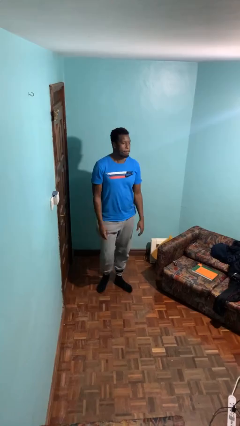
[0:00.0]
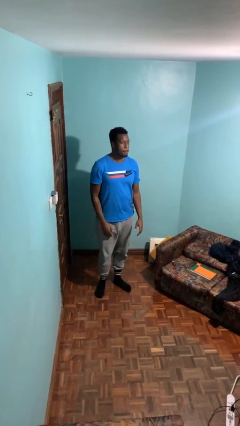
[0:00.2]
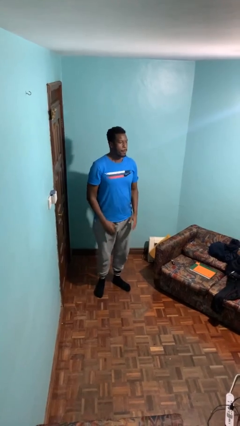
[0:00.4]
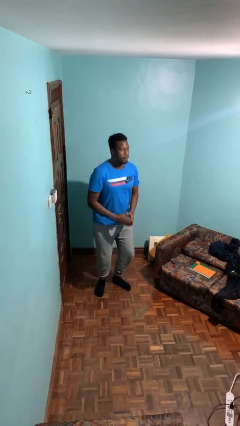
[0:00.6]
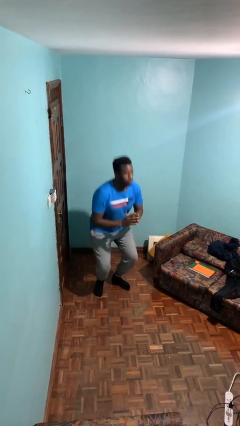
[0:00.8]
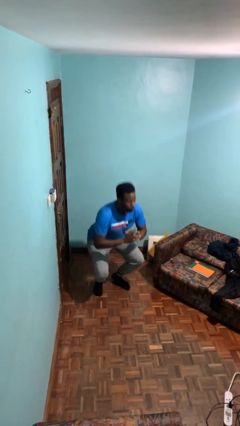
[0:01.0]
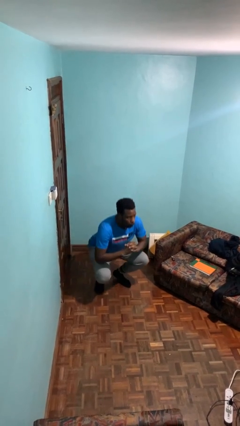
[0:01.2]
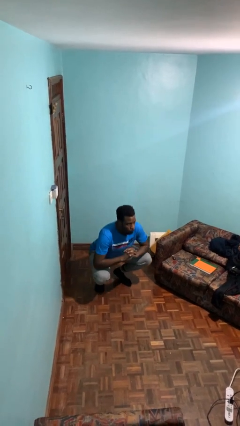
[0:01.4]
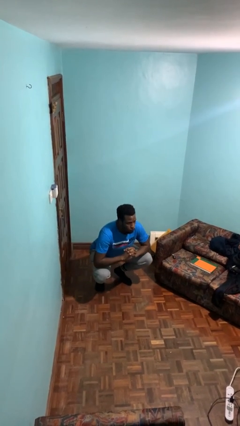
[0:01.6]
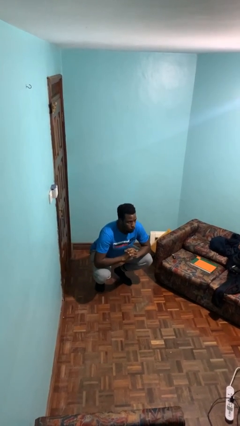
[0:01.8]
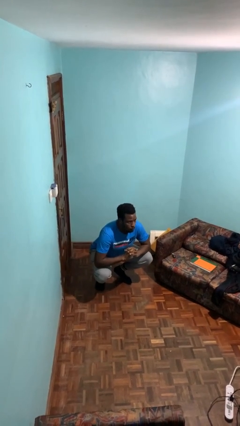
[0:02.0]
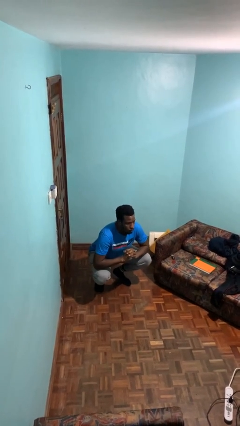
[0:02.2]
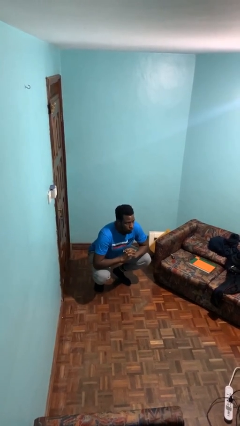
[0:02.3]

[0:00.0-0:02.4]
person squats

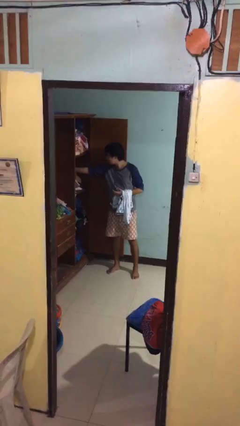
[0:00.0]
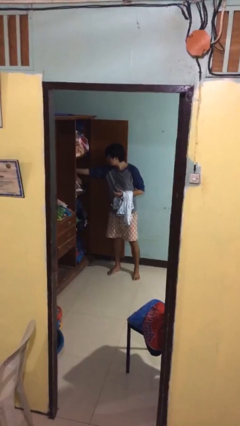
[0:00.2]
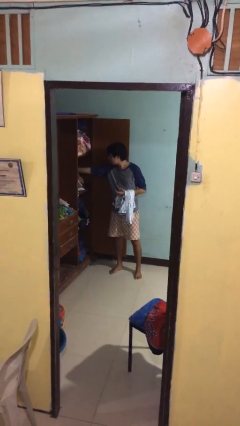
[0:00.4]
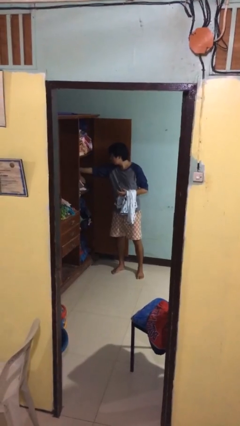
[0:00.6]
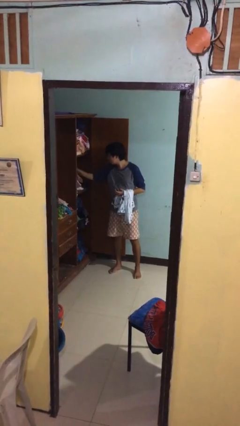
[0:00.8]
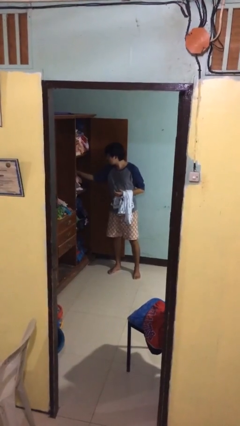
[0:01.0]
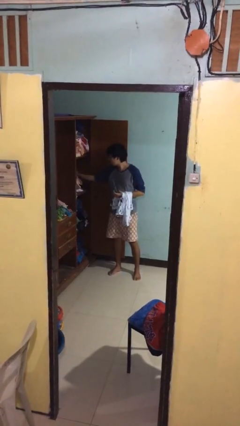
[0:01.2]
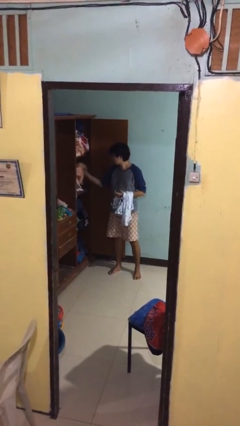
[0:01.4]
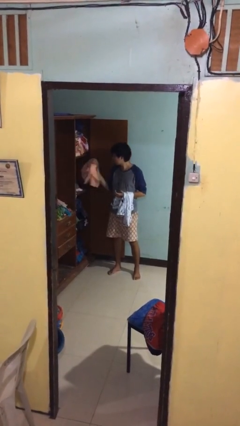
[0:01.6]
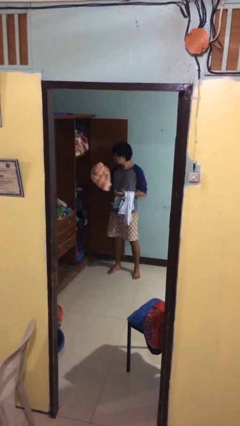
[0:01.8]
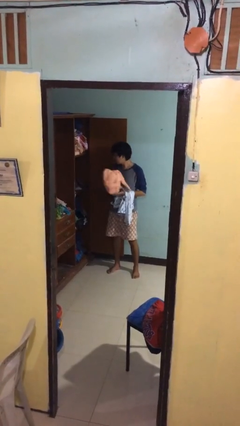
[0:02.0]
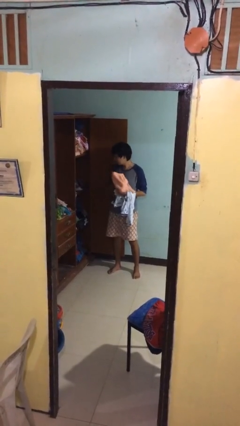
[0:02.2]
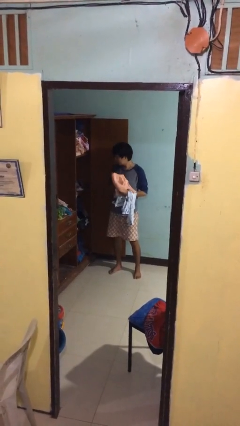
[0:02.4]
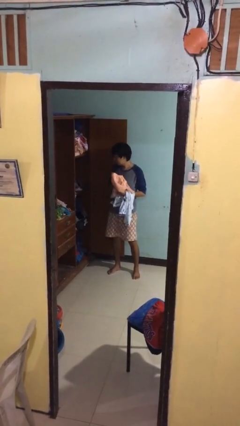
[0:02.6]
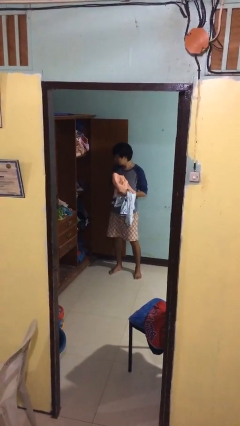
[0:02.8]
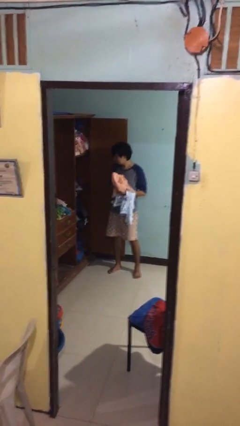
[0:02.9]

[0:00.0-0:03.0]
person takes clothes from dresser

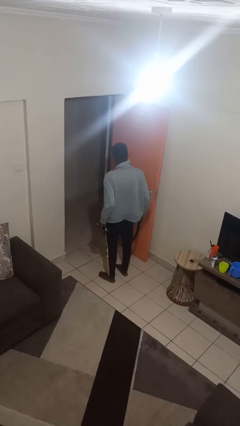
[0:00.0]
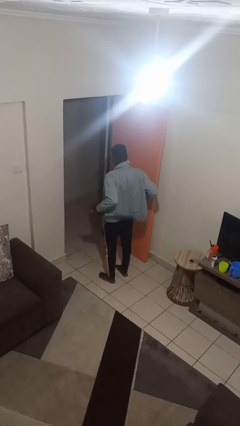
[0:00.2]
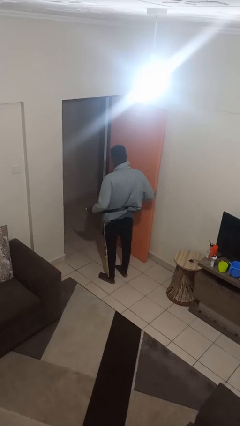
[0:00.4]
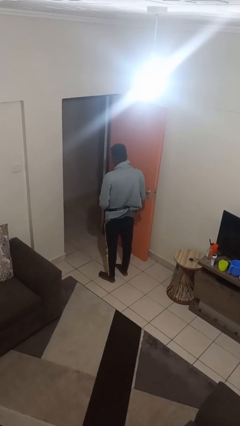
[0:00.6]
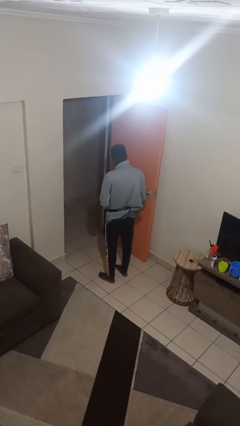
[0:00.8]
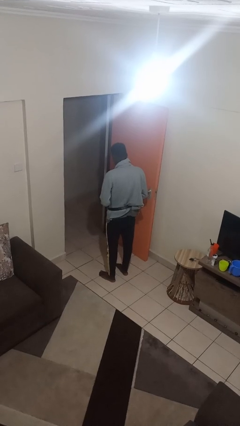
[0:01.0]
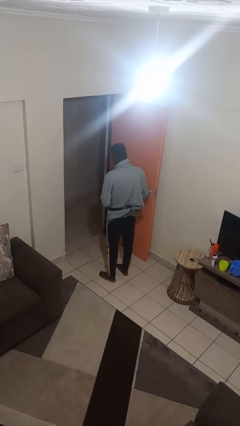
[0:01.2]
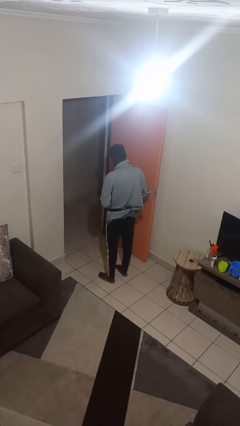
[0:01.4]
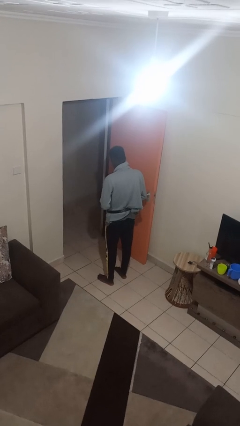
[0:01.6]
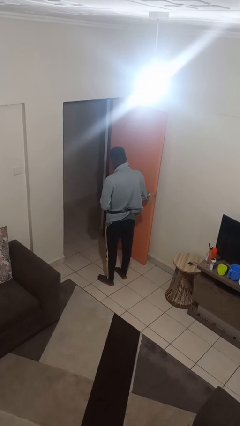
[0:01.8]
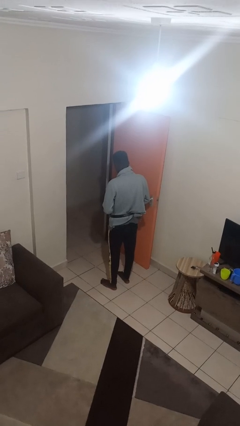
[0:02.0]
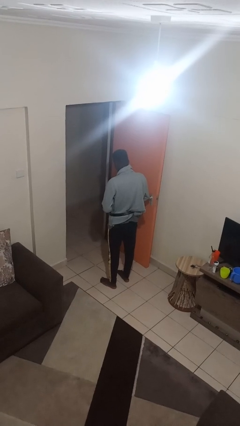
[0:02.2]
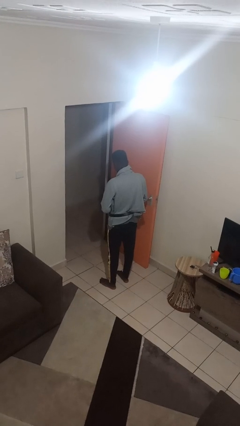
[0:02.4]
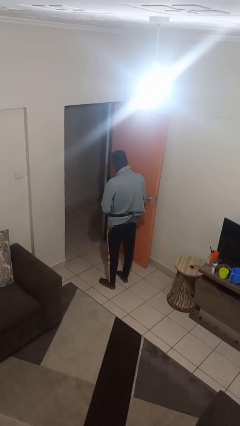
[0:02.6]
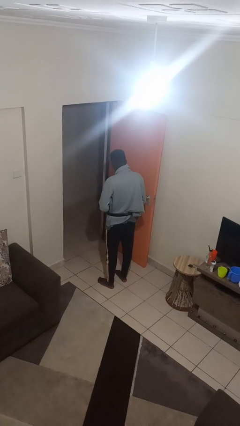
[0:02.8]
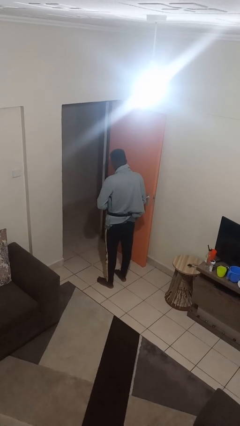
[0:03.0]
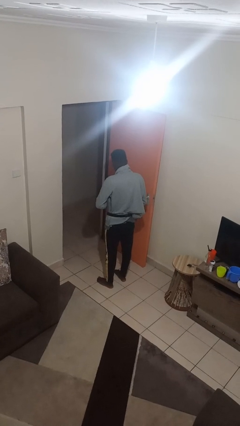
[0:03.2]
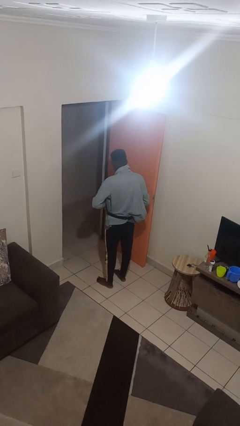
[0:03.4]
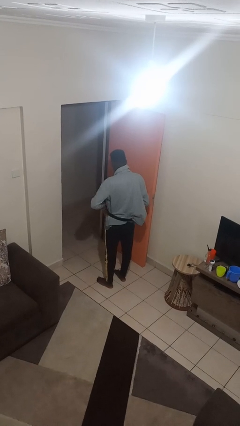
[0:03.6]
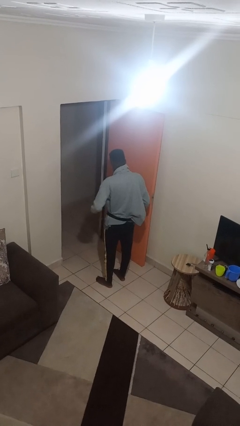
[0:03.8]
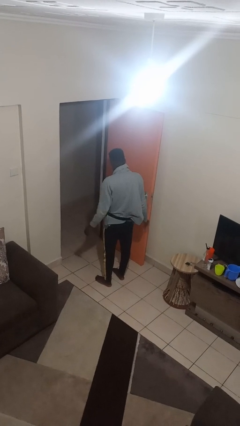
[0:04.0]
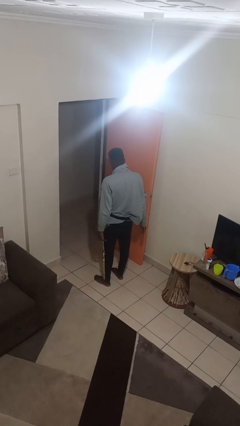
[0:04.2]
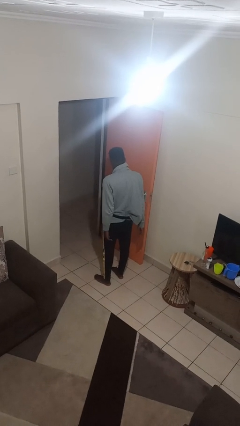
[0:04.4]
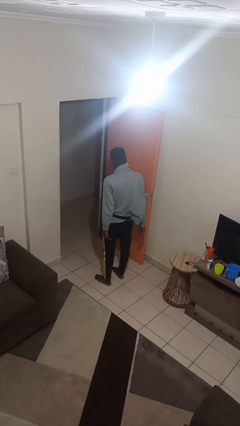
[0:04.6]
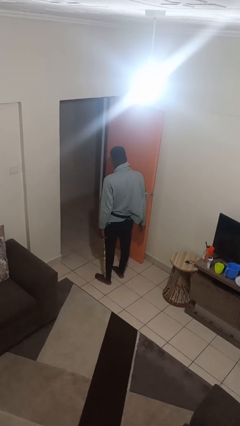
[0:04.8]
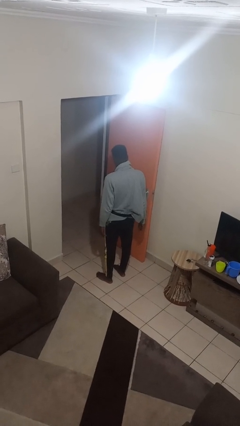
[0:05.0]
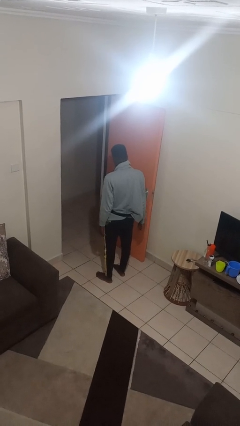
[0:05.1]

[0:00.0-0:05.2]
person puts on belt

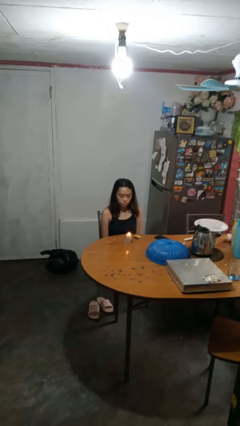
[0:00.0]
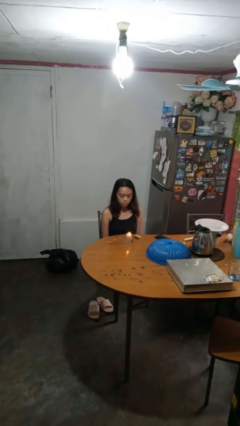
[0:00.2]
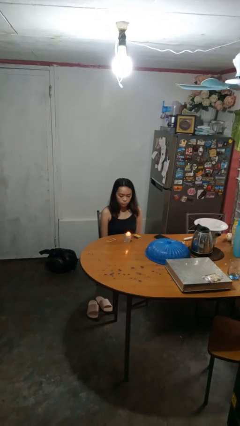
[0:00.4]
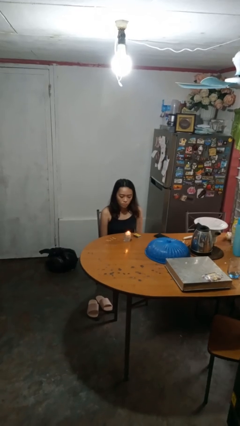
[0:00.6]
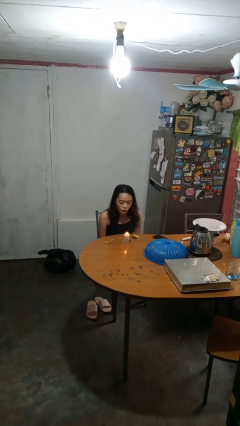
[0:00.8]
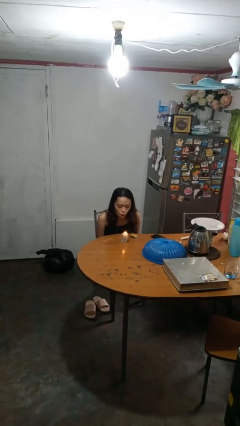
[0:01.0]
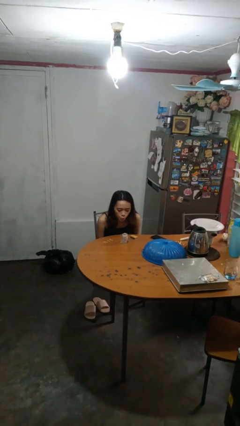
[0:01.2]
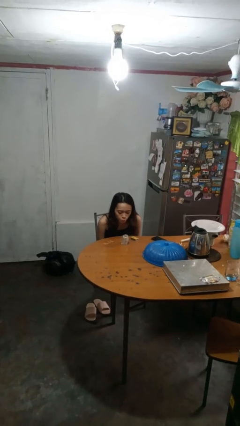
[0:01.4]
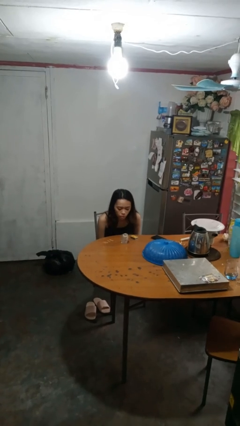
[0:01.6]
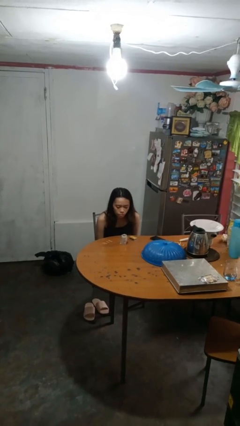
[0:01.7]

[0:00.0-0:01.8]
person extinguishes candle

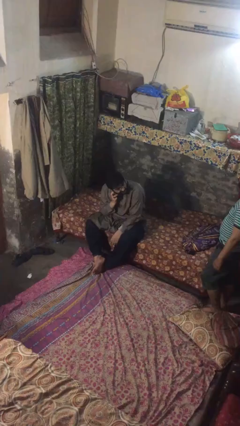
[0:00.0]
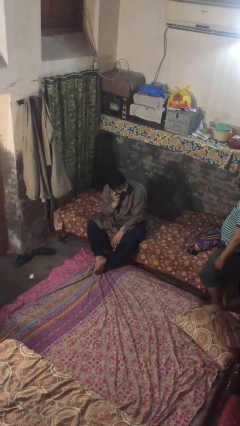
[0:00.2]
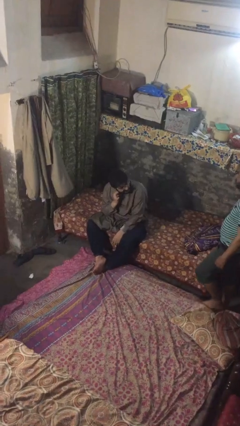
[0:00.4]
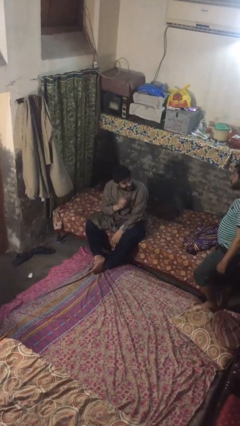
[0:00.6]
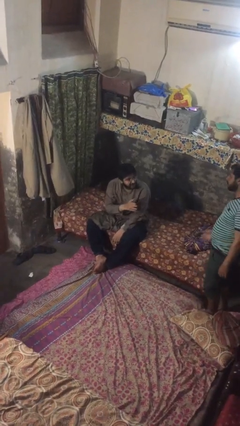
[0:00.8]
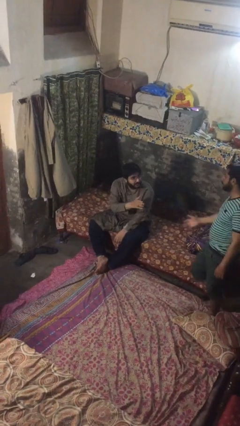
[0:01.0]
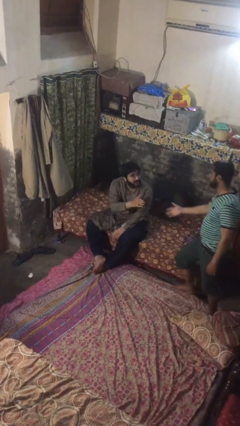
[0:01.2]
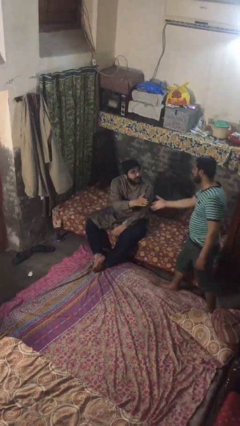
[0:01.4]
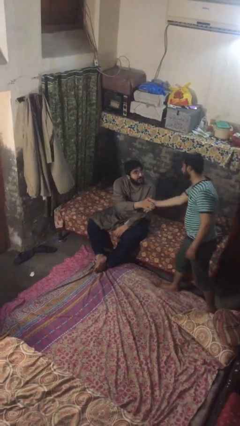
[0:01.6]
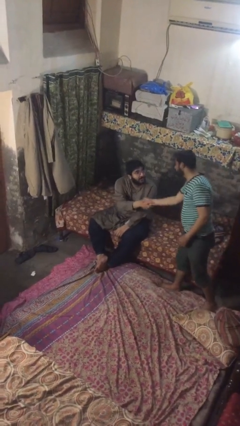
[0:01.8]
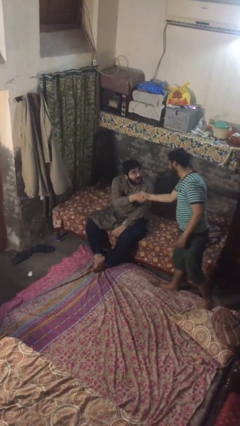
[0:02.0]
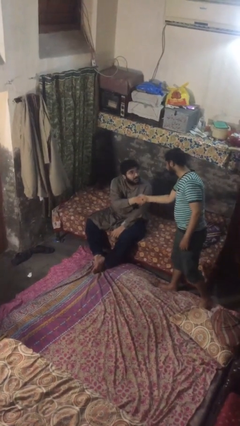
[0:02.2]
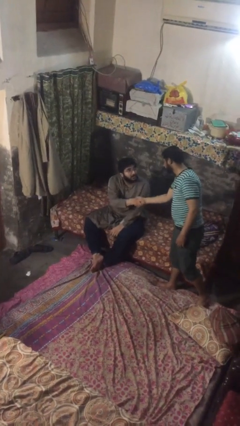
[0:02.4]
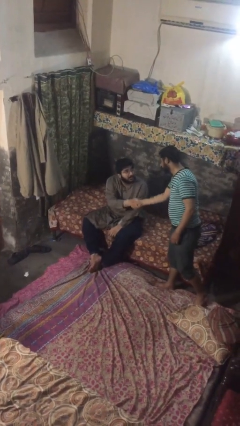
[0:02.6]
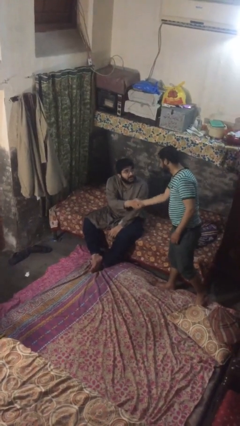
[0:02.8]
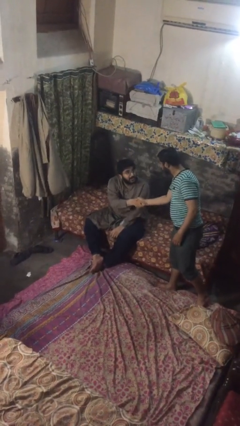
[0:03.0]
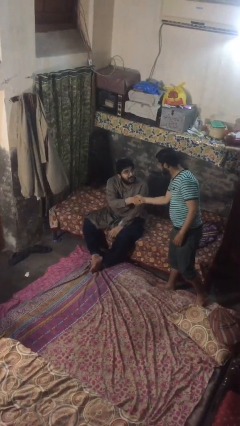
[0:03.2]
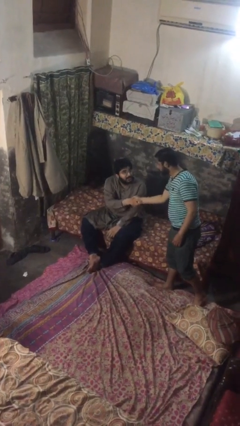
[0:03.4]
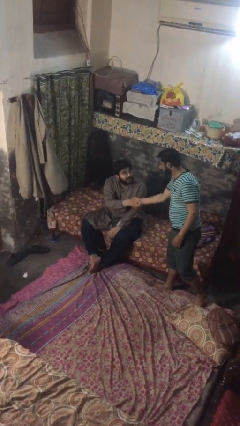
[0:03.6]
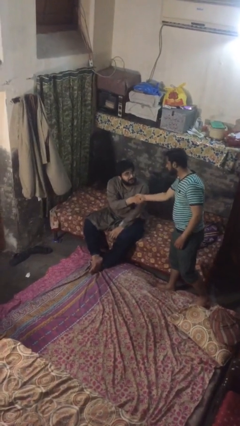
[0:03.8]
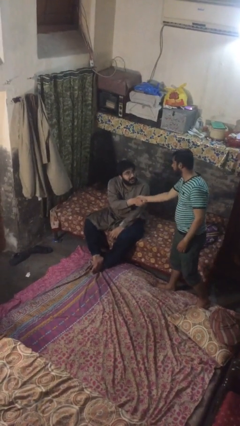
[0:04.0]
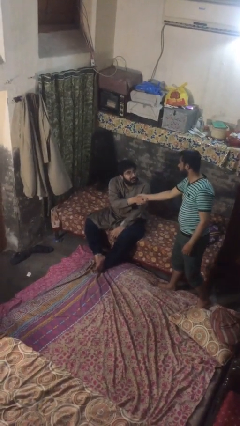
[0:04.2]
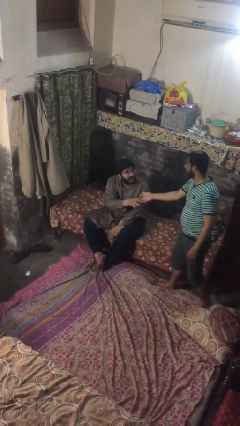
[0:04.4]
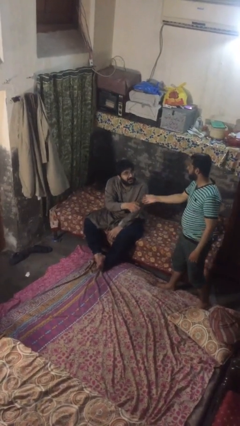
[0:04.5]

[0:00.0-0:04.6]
person shakes hand

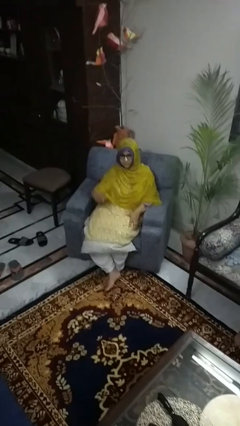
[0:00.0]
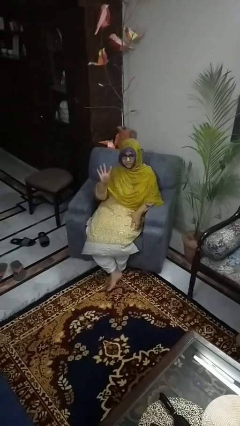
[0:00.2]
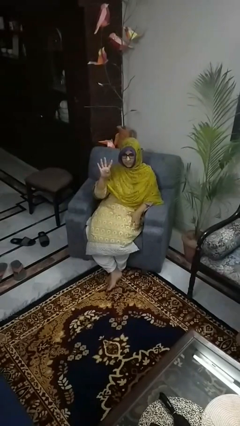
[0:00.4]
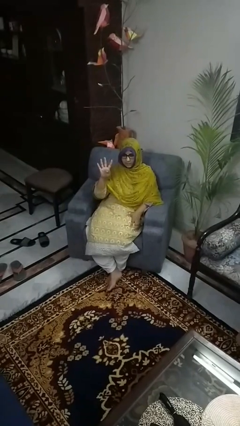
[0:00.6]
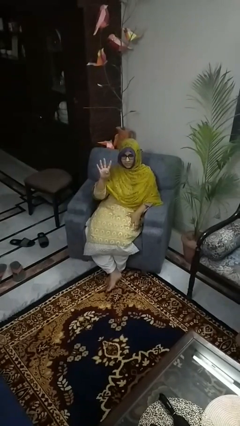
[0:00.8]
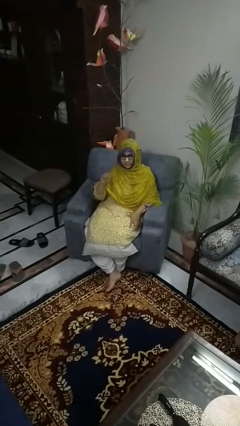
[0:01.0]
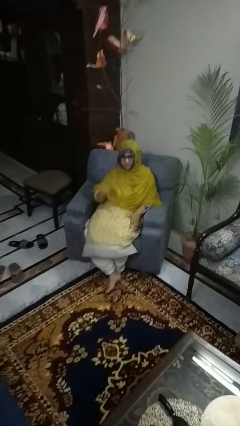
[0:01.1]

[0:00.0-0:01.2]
person gestures number four
